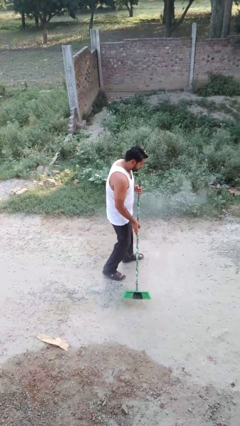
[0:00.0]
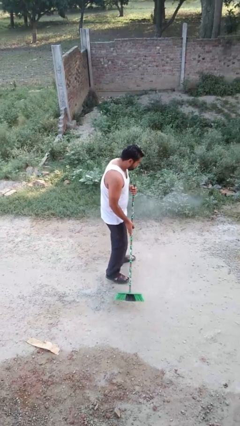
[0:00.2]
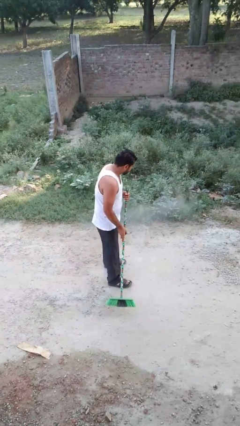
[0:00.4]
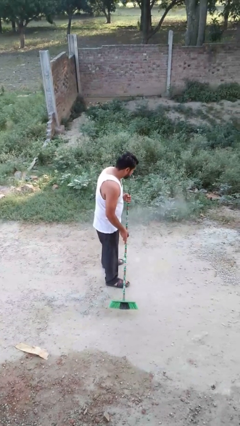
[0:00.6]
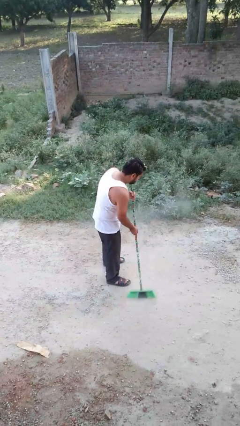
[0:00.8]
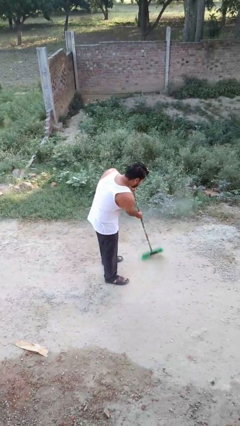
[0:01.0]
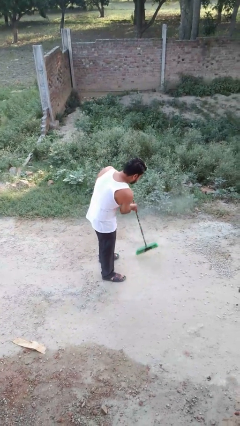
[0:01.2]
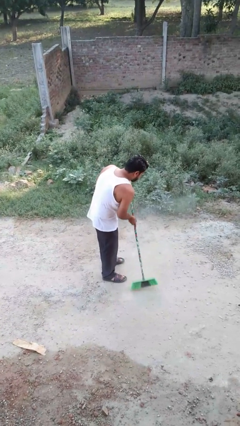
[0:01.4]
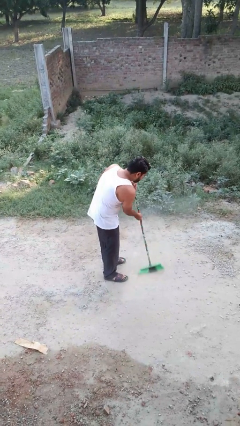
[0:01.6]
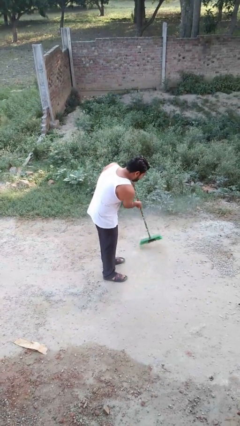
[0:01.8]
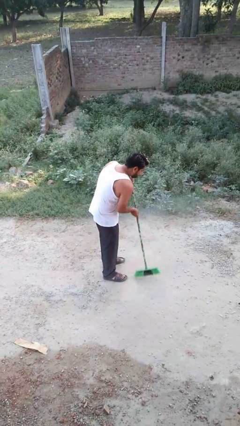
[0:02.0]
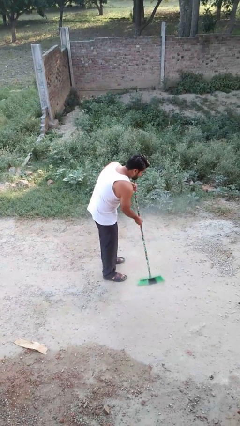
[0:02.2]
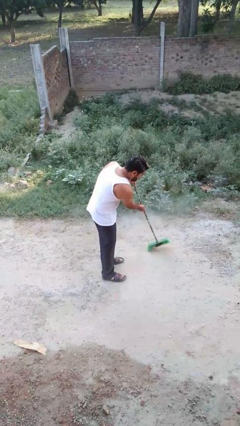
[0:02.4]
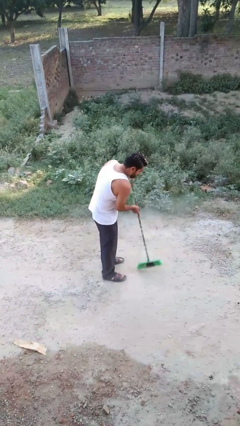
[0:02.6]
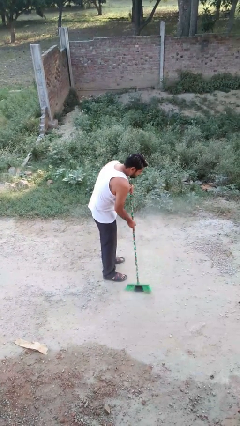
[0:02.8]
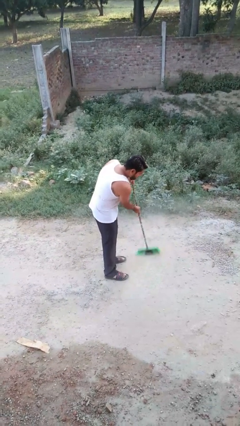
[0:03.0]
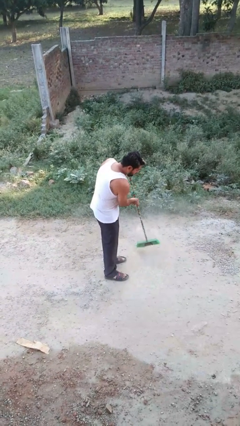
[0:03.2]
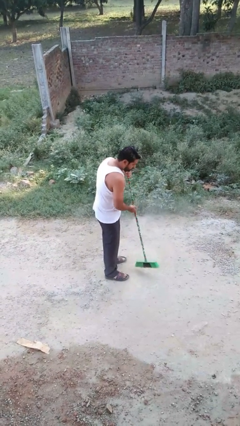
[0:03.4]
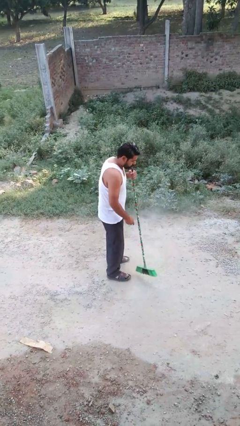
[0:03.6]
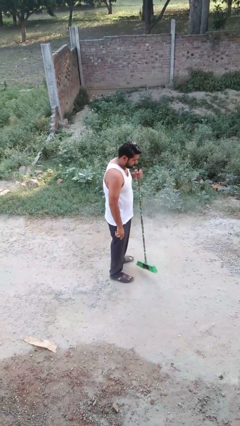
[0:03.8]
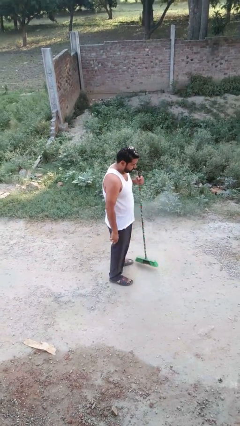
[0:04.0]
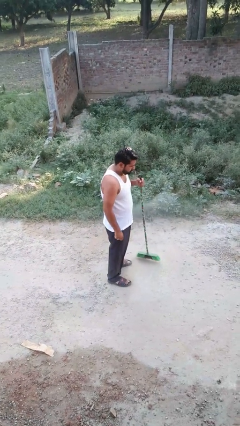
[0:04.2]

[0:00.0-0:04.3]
person sweeps floor

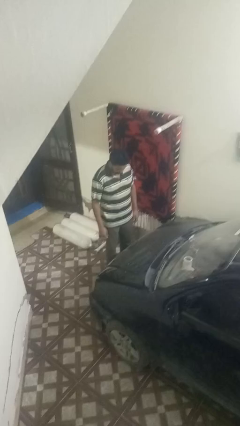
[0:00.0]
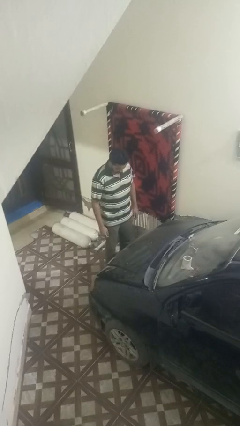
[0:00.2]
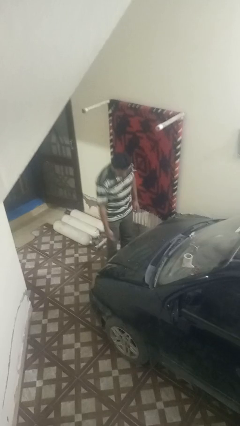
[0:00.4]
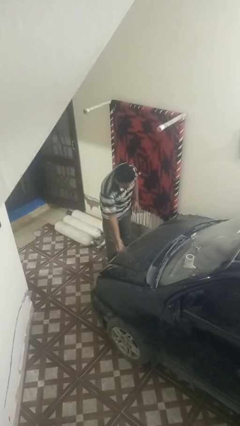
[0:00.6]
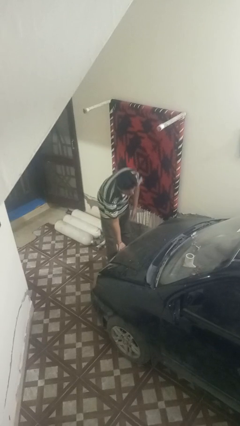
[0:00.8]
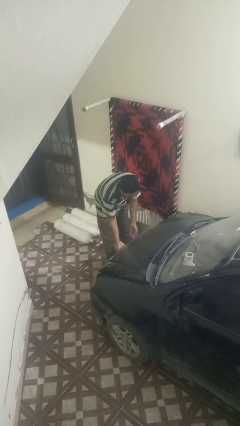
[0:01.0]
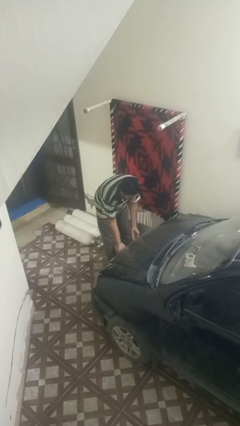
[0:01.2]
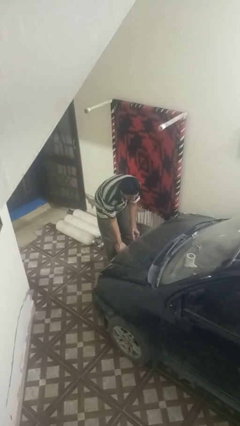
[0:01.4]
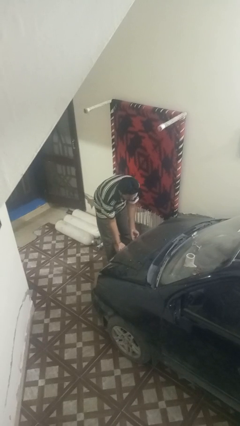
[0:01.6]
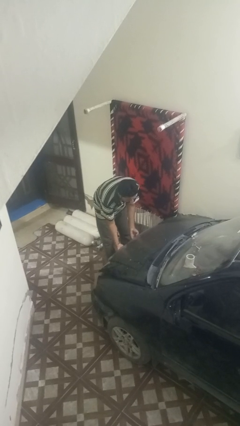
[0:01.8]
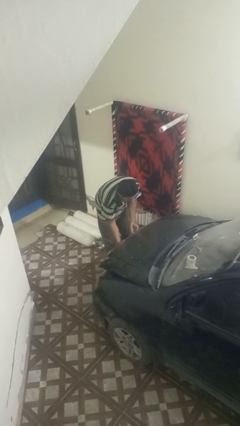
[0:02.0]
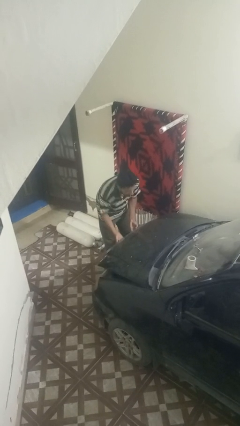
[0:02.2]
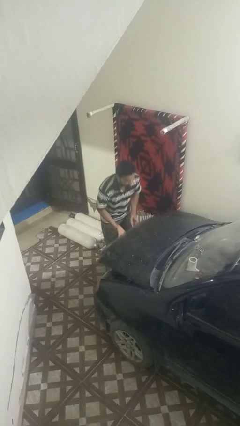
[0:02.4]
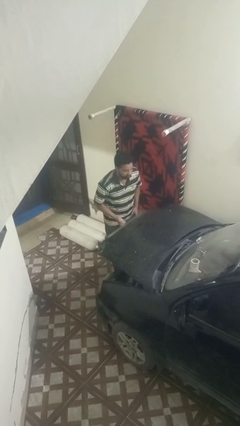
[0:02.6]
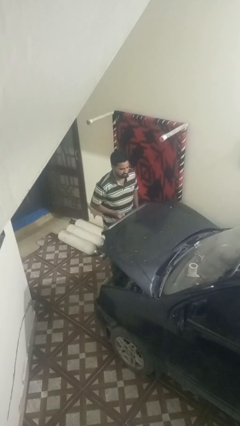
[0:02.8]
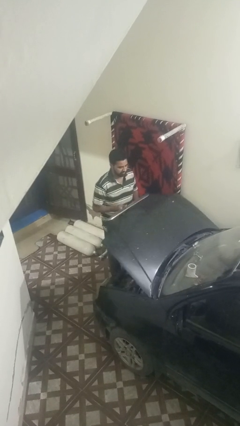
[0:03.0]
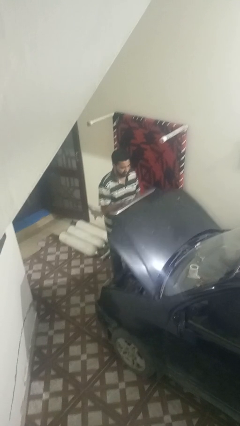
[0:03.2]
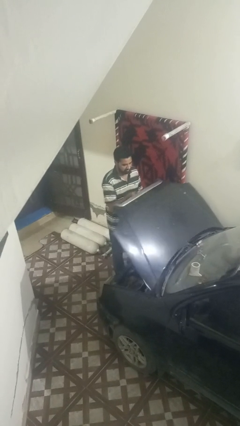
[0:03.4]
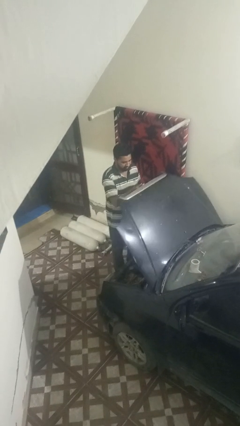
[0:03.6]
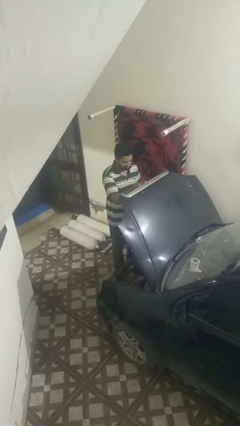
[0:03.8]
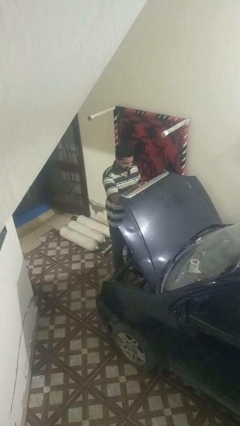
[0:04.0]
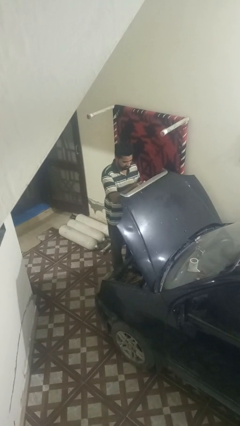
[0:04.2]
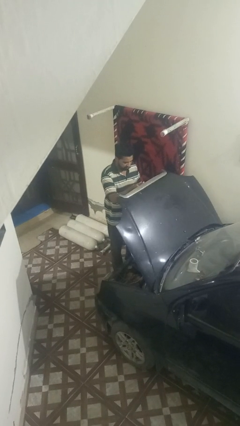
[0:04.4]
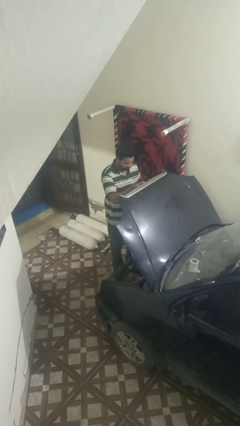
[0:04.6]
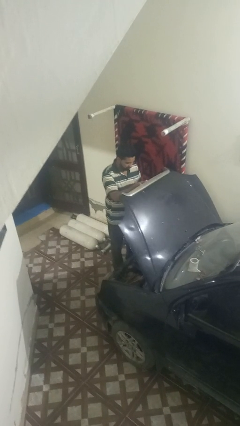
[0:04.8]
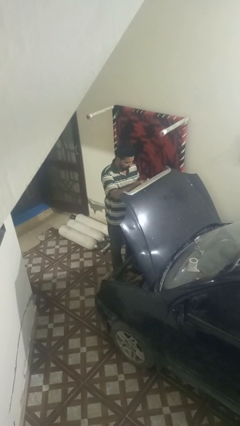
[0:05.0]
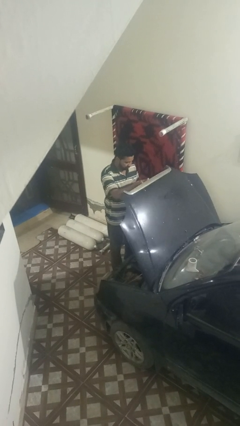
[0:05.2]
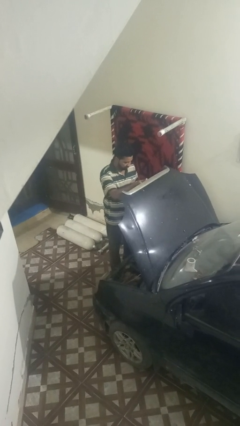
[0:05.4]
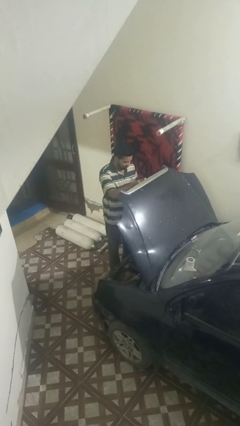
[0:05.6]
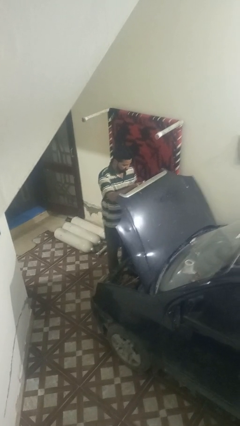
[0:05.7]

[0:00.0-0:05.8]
person opens car hood

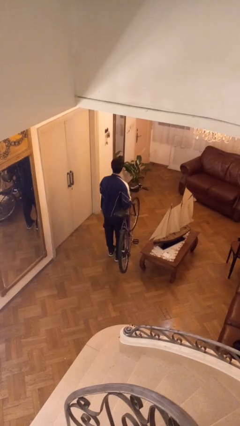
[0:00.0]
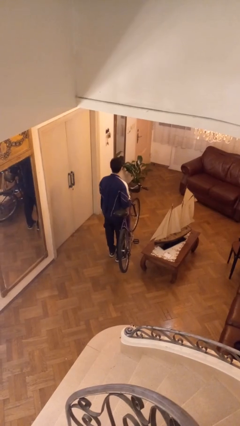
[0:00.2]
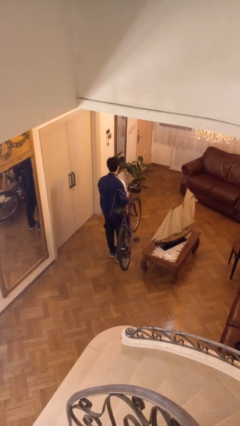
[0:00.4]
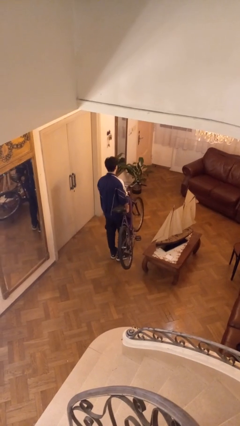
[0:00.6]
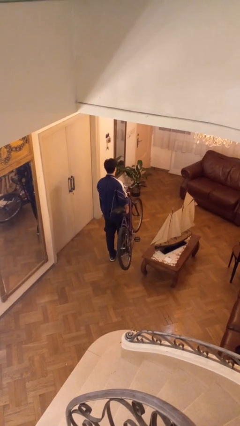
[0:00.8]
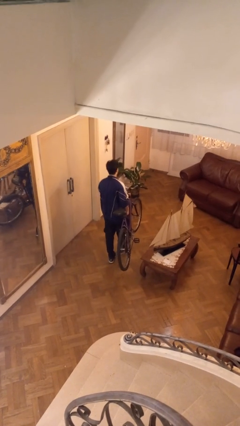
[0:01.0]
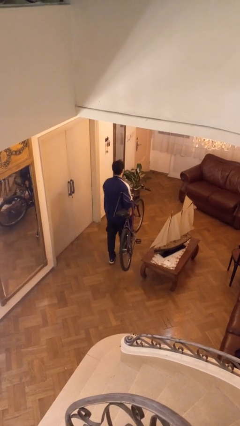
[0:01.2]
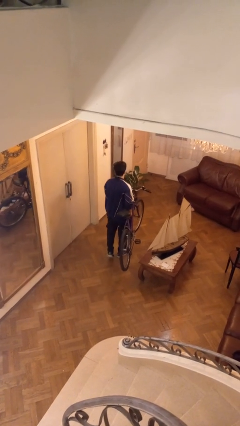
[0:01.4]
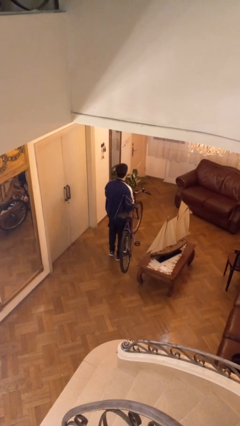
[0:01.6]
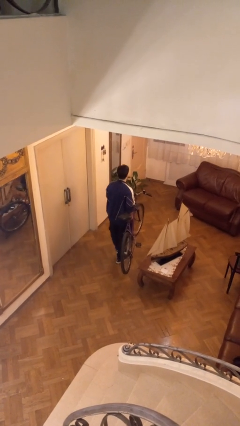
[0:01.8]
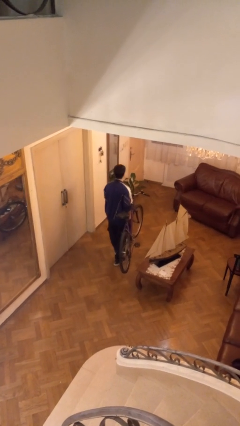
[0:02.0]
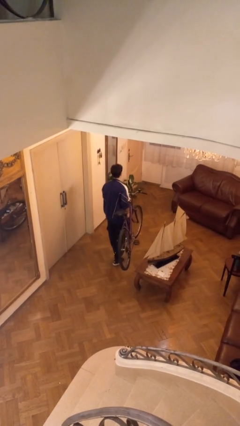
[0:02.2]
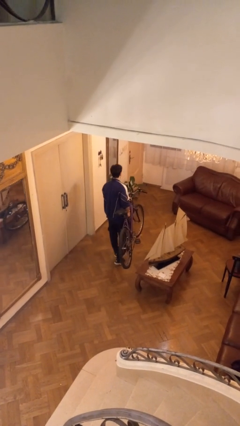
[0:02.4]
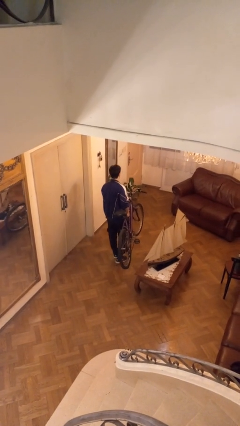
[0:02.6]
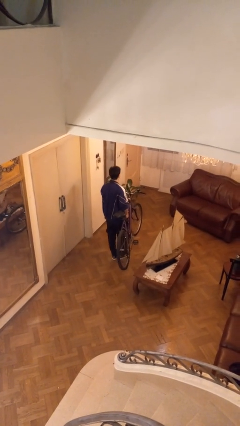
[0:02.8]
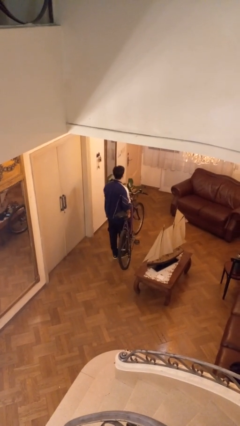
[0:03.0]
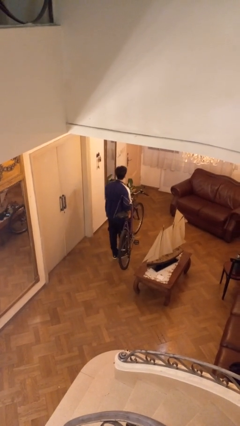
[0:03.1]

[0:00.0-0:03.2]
person carries bicycle

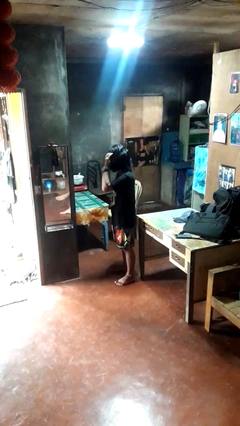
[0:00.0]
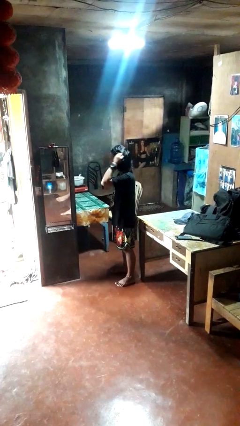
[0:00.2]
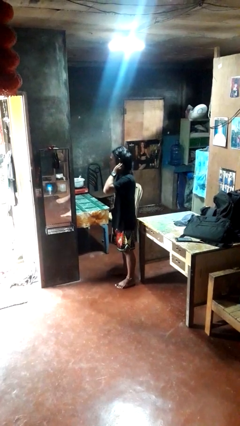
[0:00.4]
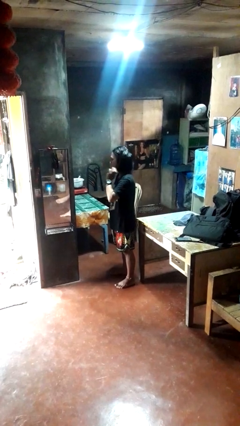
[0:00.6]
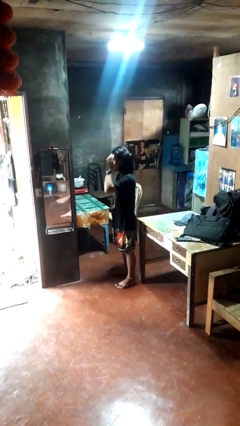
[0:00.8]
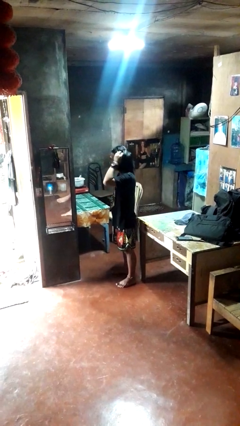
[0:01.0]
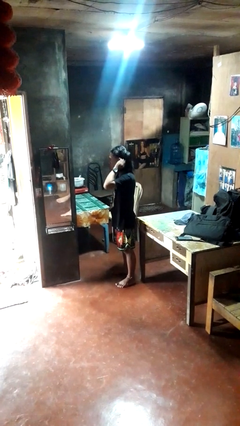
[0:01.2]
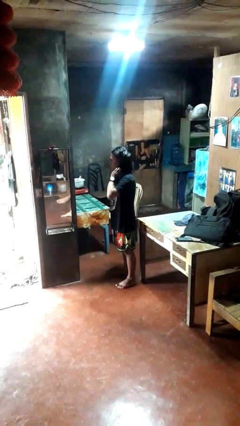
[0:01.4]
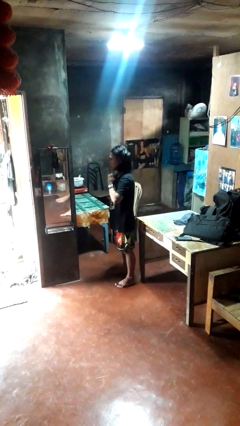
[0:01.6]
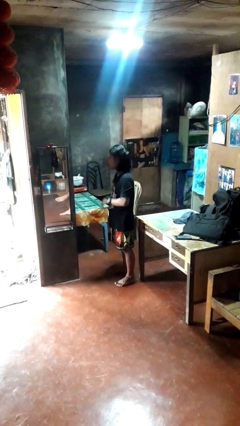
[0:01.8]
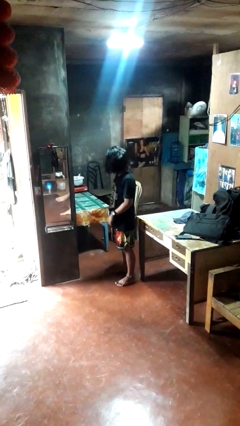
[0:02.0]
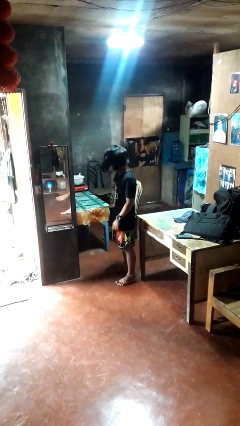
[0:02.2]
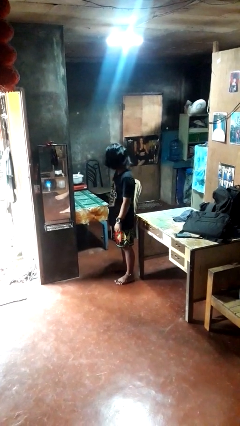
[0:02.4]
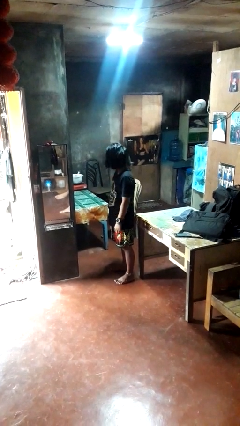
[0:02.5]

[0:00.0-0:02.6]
person strokes hair

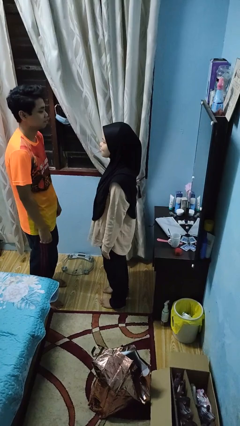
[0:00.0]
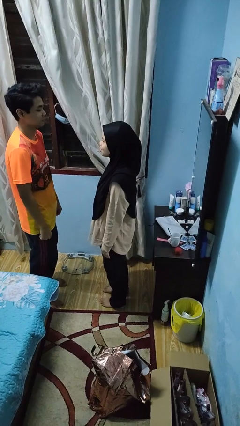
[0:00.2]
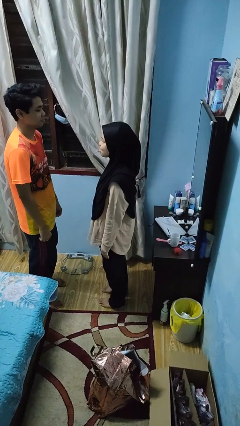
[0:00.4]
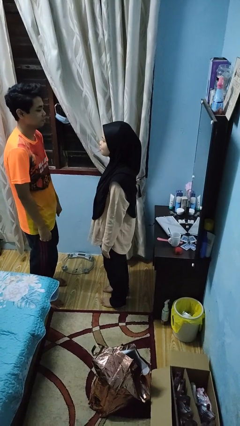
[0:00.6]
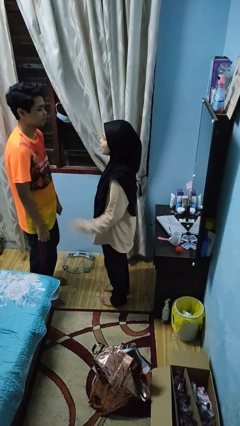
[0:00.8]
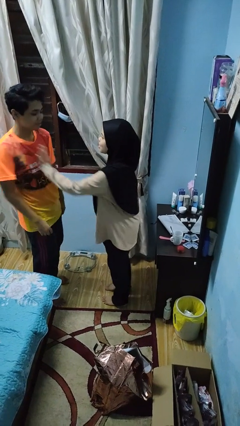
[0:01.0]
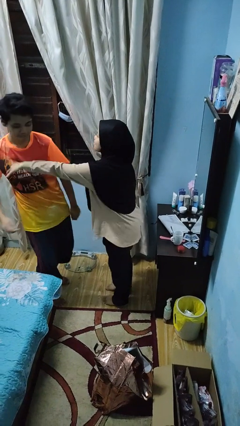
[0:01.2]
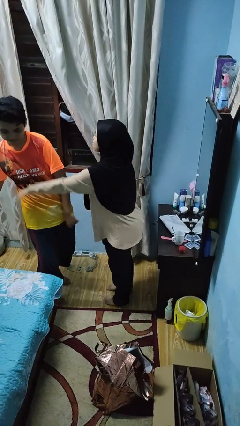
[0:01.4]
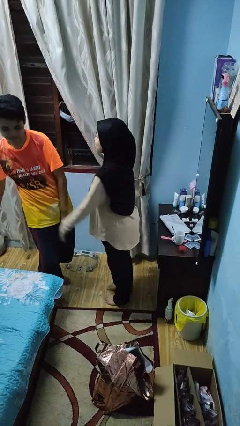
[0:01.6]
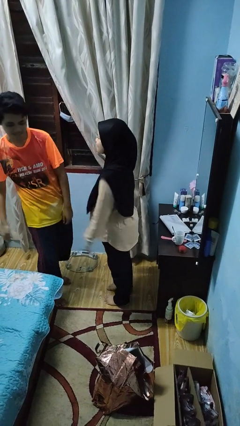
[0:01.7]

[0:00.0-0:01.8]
person shoves person
